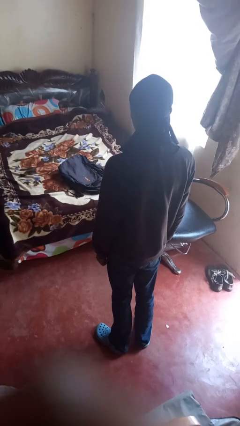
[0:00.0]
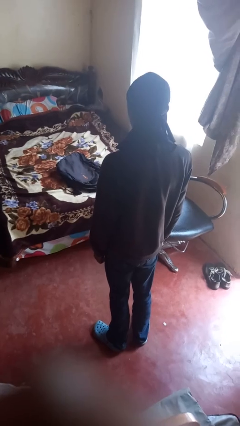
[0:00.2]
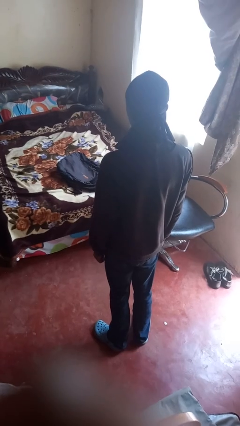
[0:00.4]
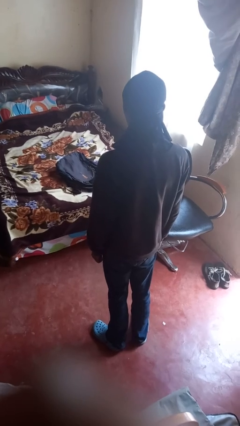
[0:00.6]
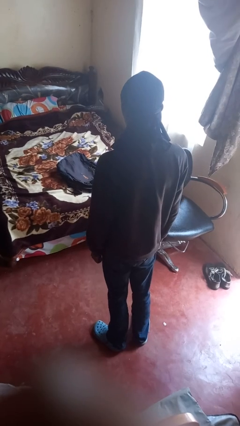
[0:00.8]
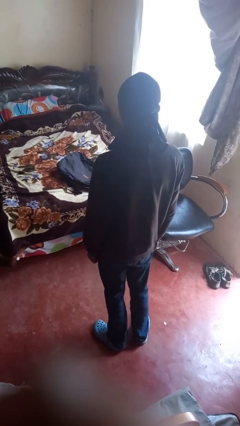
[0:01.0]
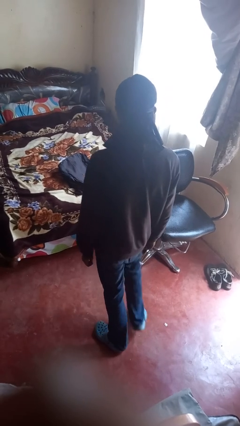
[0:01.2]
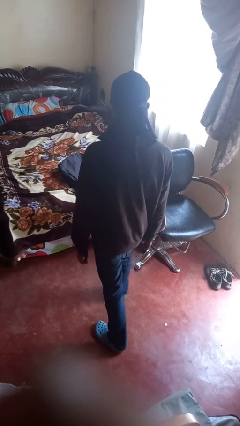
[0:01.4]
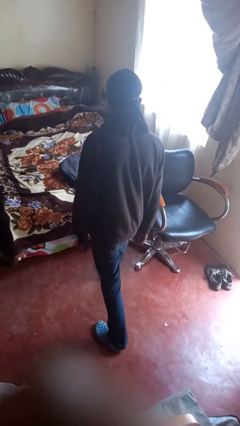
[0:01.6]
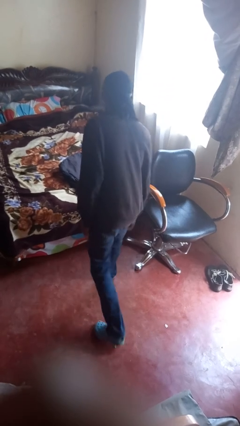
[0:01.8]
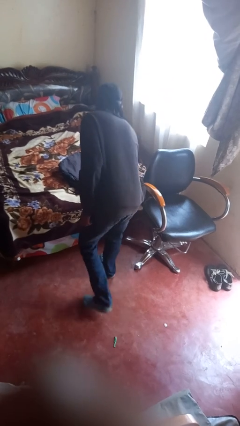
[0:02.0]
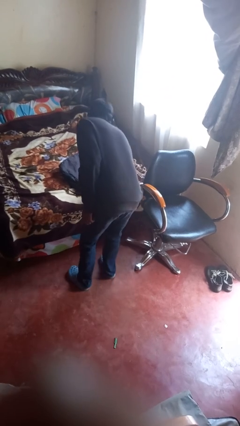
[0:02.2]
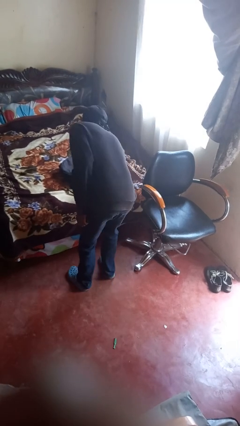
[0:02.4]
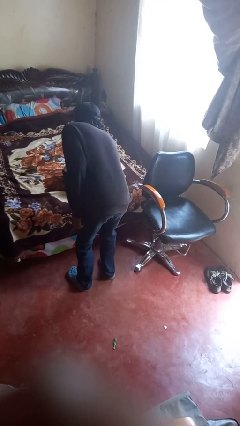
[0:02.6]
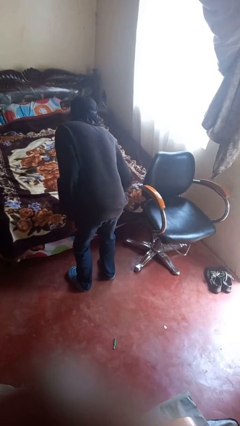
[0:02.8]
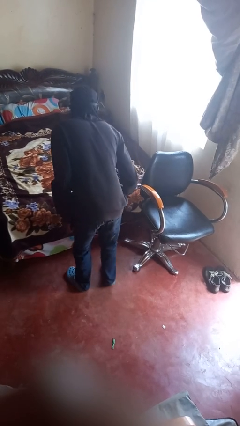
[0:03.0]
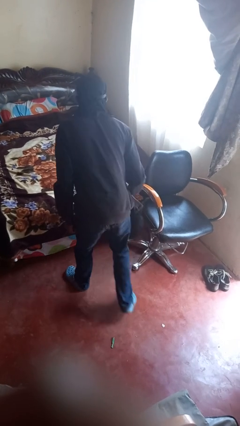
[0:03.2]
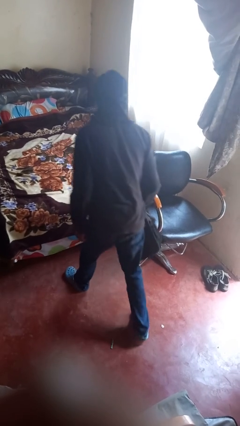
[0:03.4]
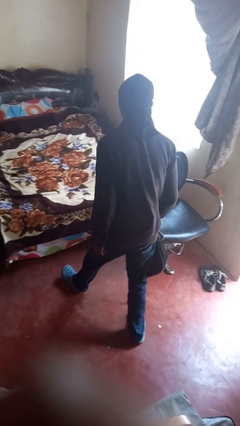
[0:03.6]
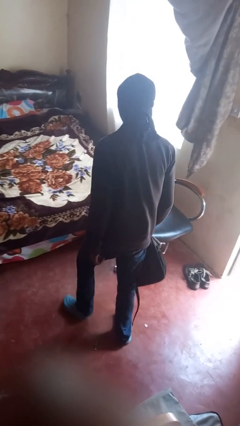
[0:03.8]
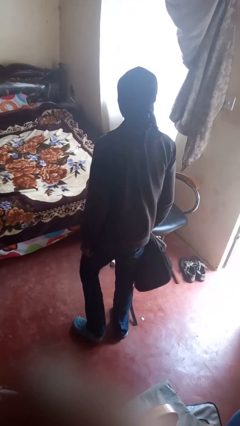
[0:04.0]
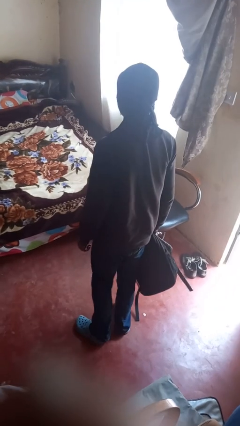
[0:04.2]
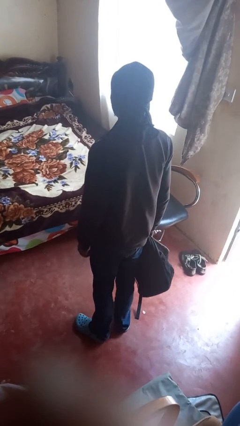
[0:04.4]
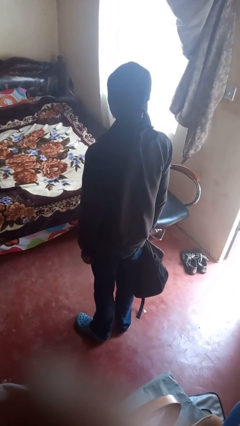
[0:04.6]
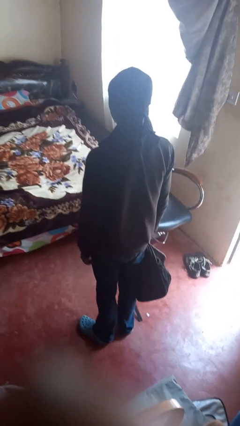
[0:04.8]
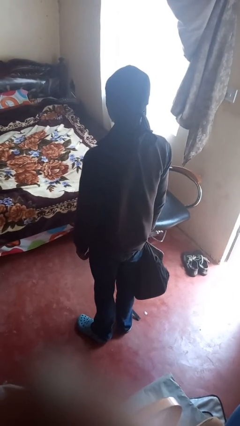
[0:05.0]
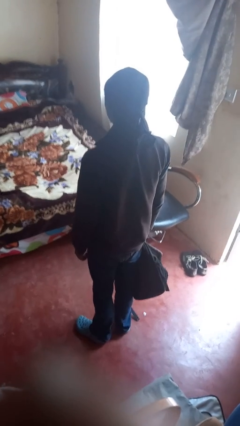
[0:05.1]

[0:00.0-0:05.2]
person picks up object from bed

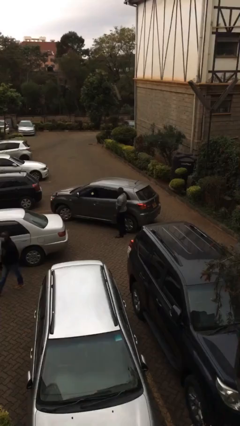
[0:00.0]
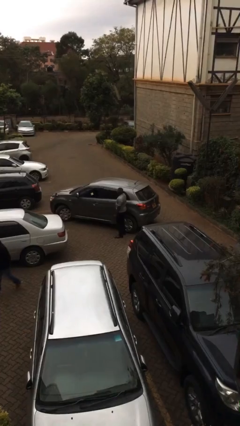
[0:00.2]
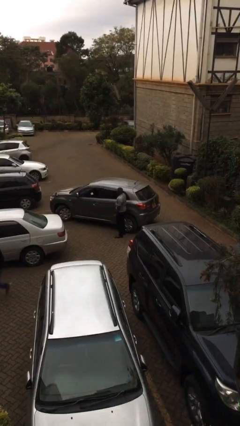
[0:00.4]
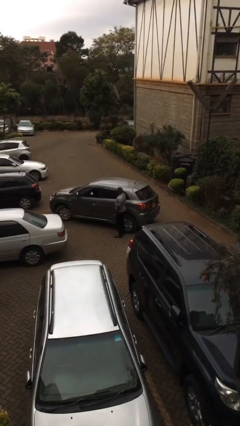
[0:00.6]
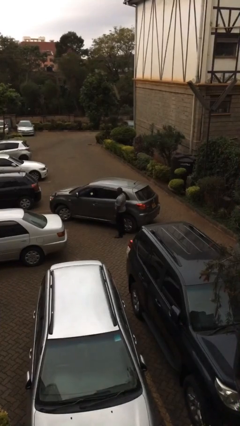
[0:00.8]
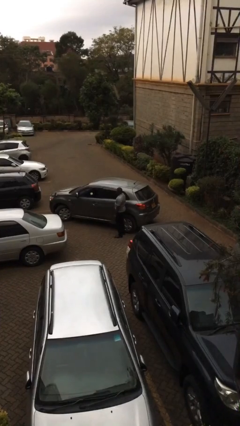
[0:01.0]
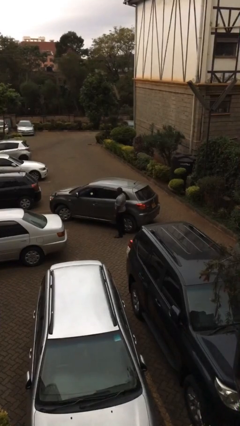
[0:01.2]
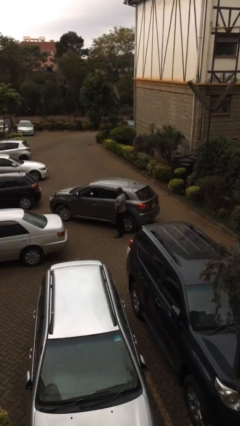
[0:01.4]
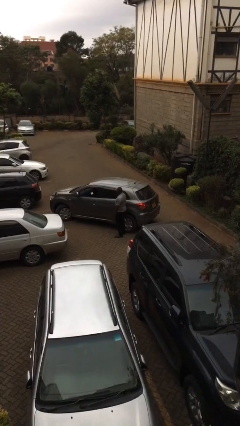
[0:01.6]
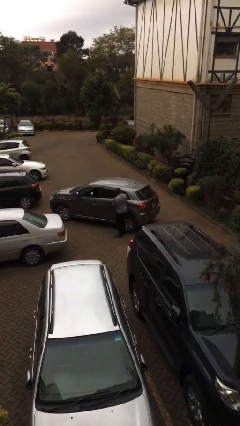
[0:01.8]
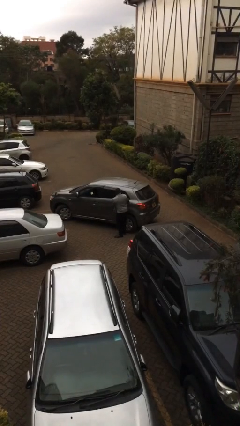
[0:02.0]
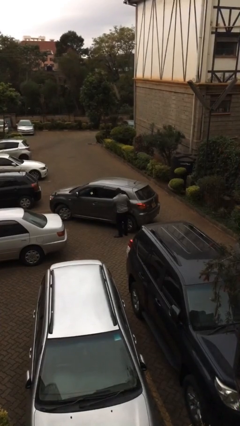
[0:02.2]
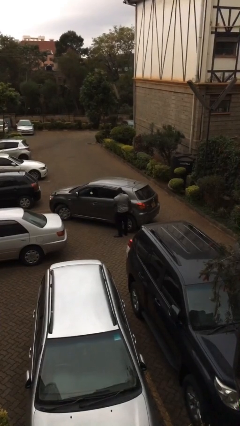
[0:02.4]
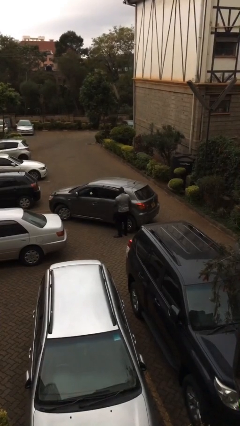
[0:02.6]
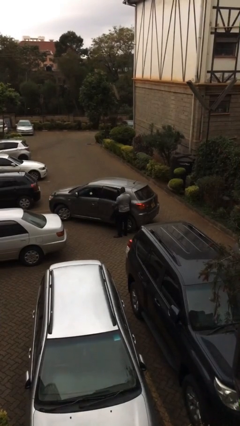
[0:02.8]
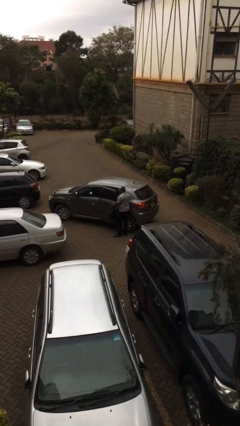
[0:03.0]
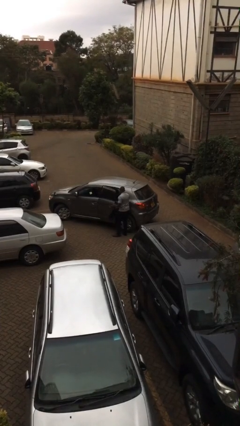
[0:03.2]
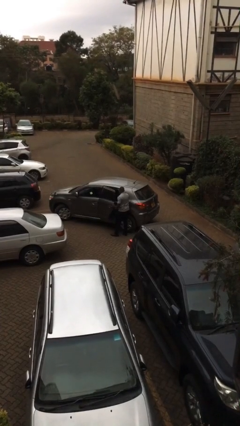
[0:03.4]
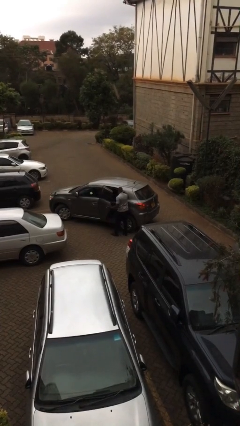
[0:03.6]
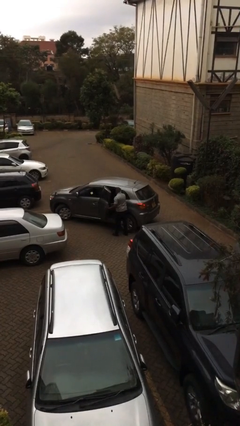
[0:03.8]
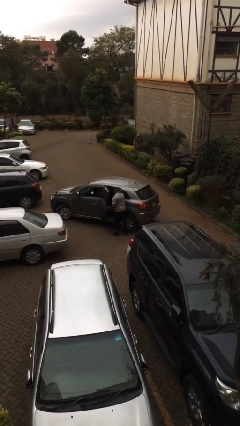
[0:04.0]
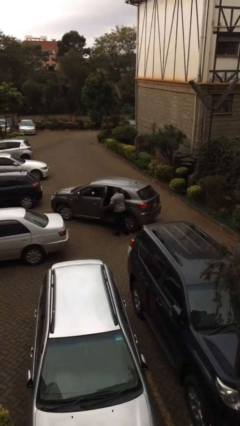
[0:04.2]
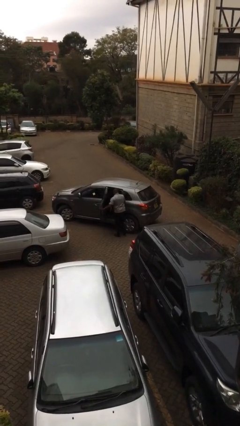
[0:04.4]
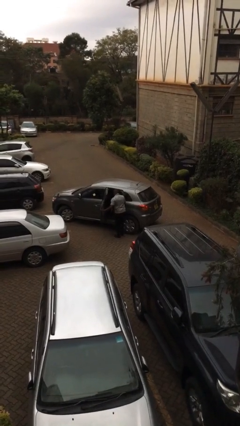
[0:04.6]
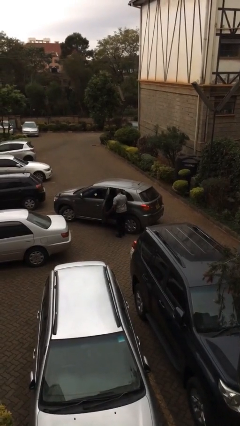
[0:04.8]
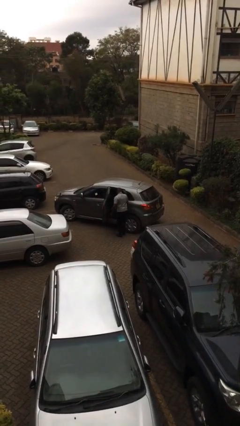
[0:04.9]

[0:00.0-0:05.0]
person opens car door

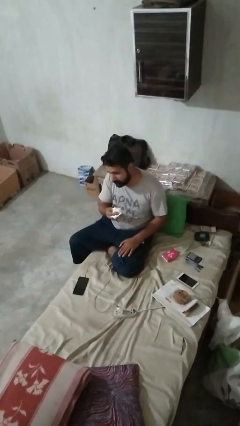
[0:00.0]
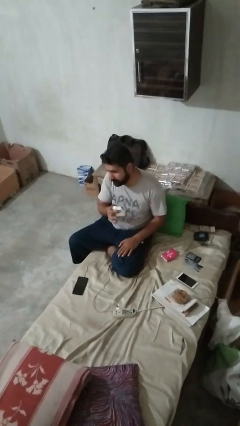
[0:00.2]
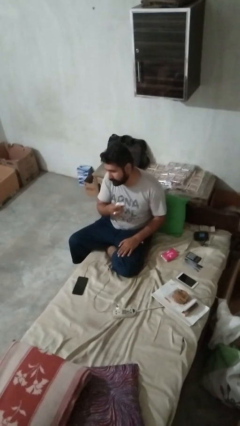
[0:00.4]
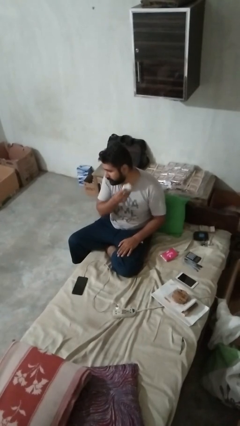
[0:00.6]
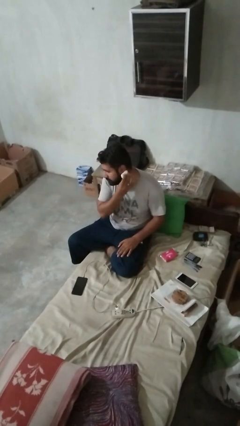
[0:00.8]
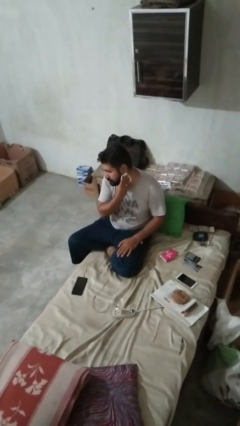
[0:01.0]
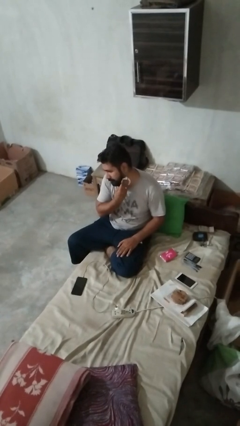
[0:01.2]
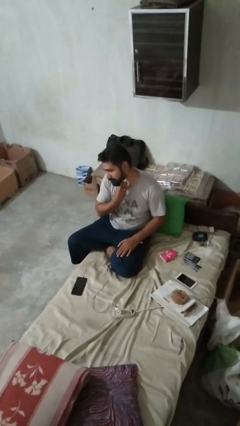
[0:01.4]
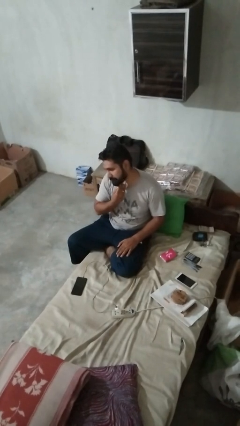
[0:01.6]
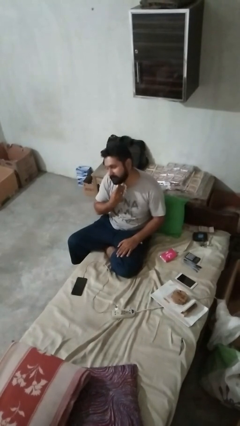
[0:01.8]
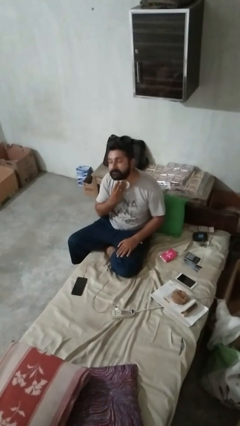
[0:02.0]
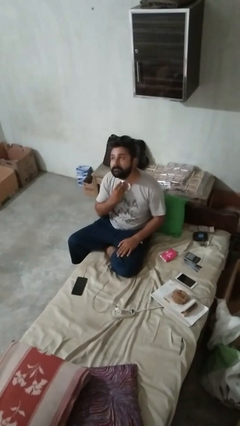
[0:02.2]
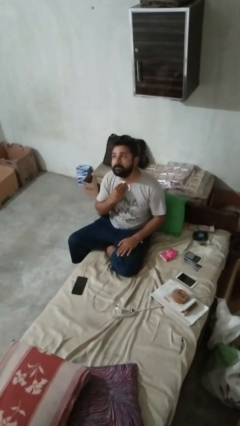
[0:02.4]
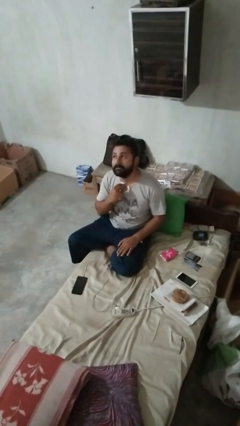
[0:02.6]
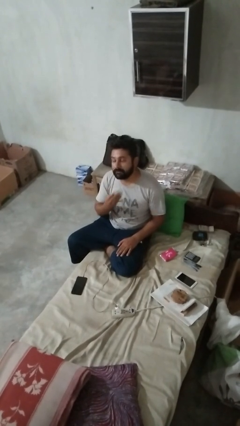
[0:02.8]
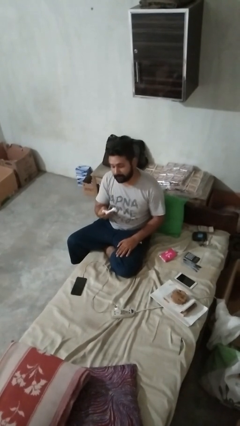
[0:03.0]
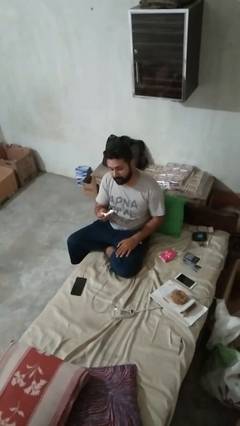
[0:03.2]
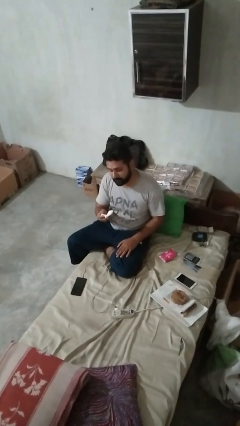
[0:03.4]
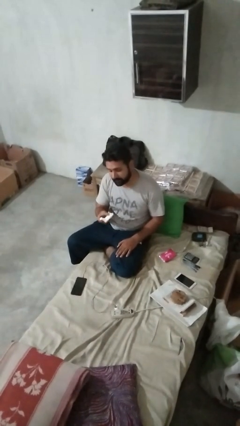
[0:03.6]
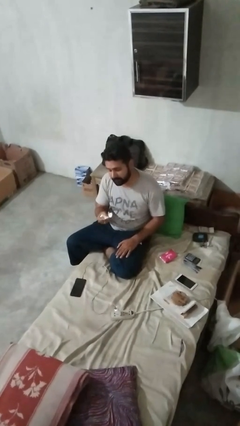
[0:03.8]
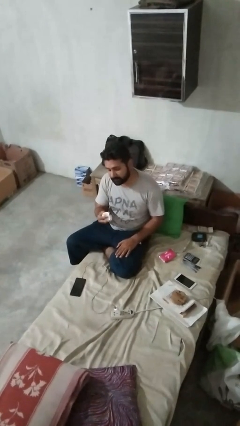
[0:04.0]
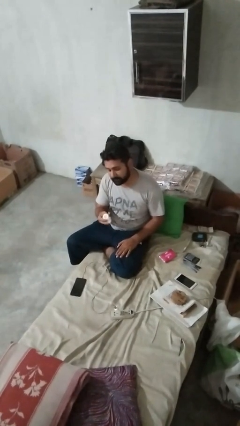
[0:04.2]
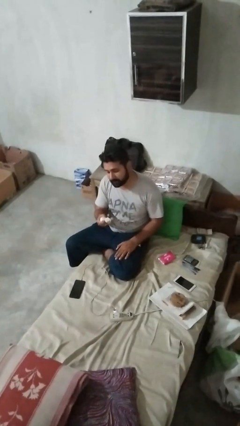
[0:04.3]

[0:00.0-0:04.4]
person wipes mouth with napkin

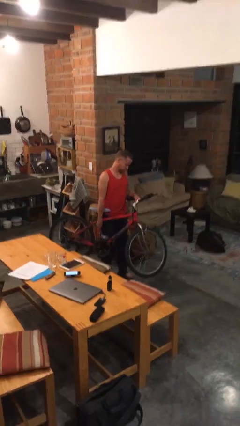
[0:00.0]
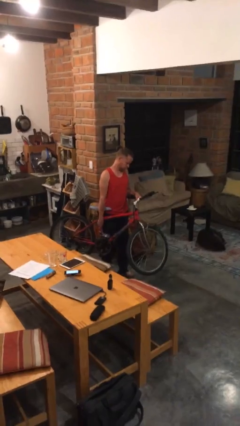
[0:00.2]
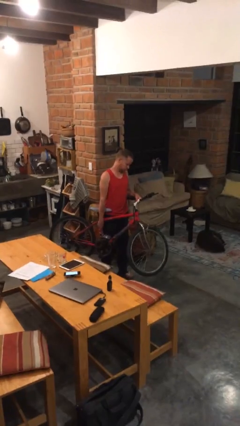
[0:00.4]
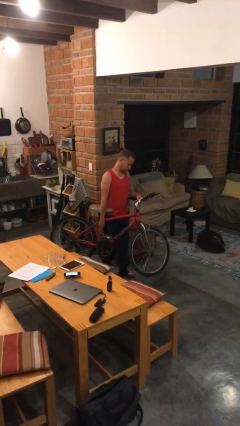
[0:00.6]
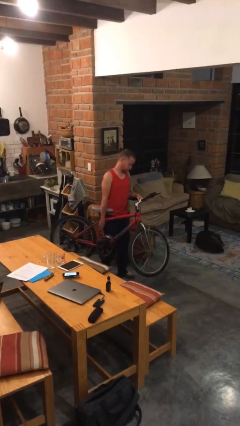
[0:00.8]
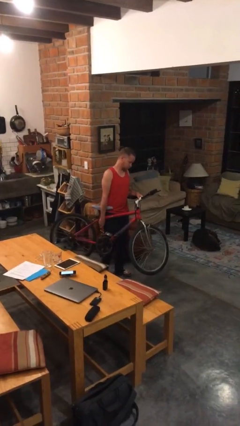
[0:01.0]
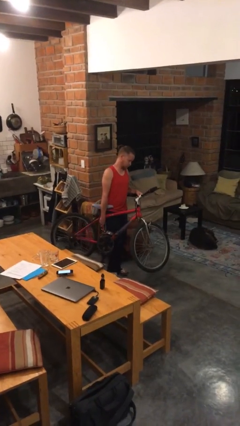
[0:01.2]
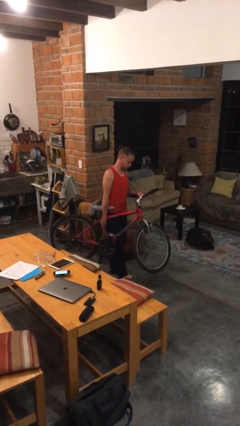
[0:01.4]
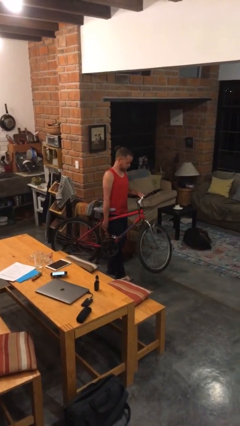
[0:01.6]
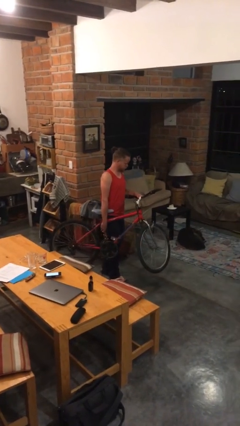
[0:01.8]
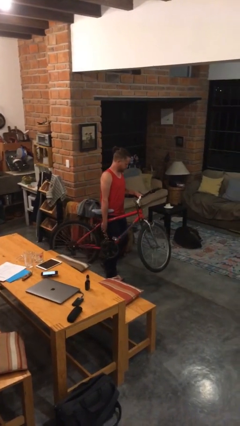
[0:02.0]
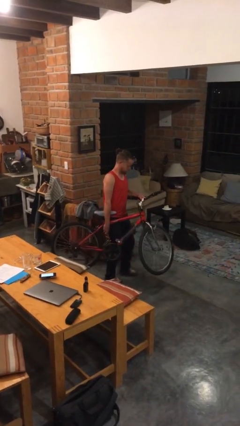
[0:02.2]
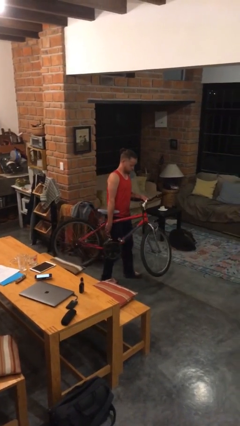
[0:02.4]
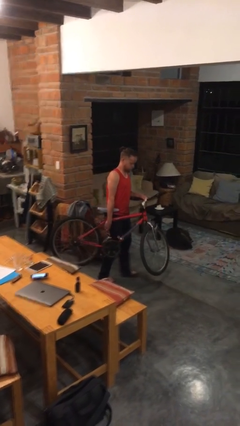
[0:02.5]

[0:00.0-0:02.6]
person carries bicycle
